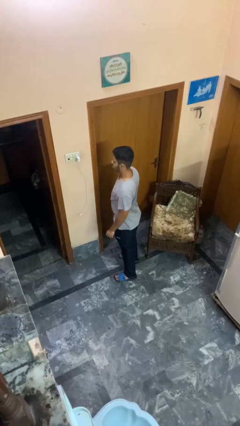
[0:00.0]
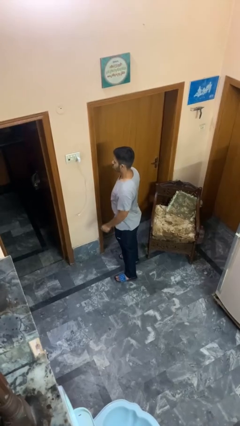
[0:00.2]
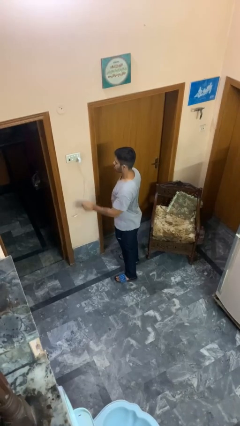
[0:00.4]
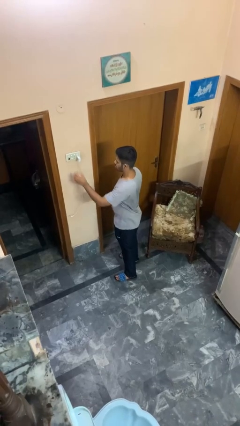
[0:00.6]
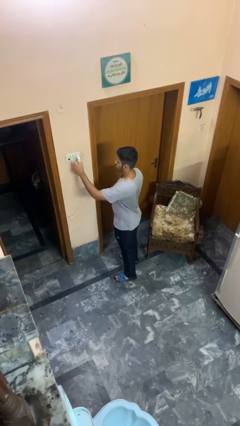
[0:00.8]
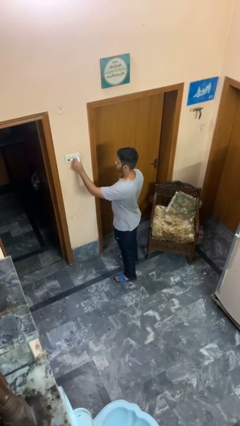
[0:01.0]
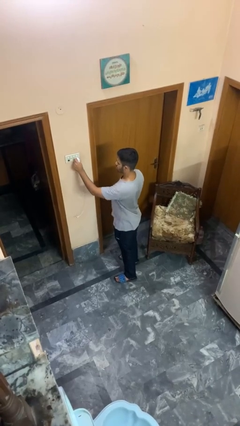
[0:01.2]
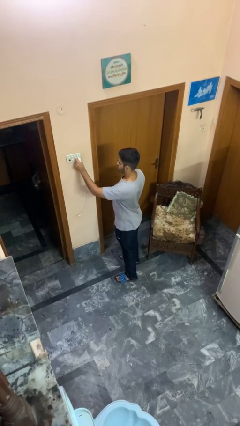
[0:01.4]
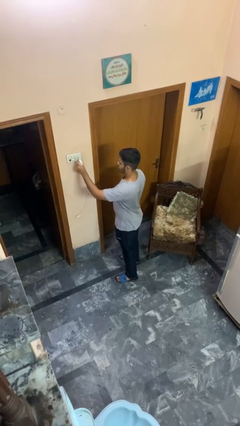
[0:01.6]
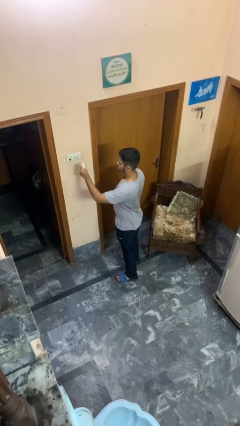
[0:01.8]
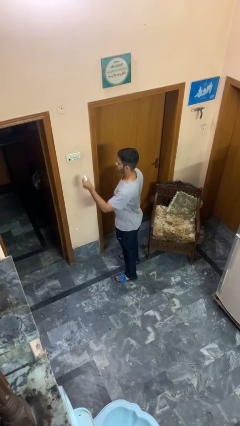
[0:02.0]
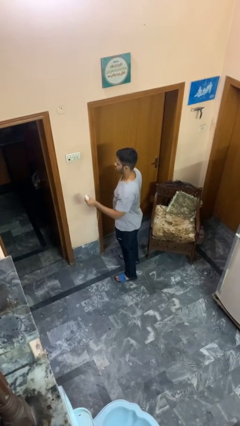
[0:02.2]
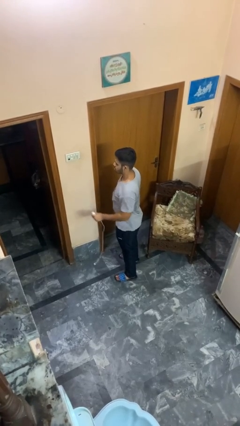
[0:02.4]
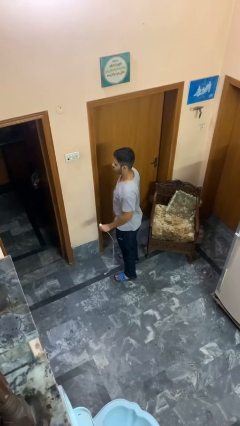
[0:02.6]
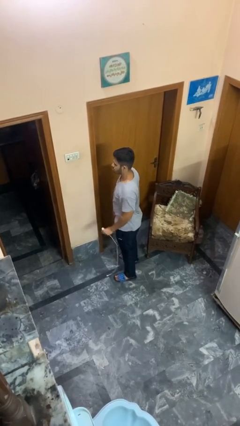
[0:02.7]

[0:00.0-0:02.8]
person unplugs from electrical socket

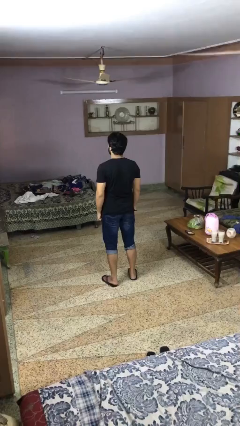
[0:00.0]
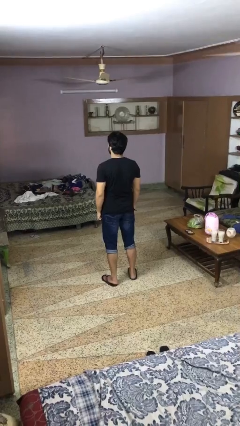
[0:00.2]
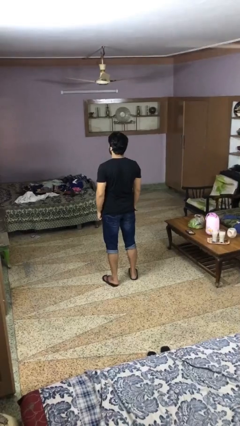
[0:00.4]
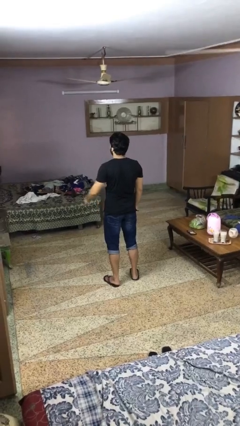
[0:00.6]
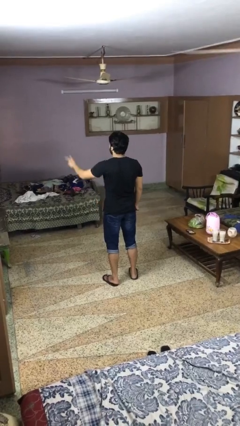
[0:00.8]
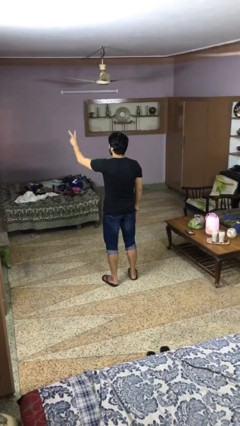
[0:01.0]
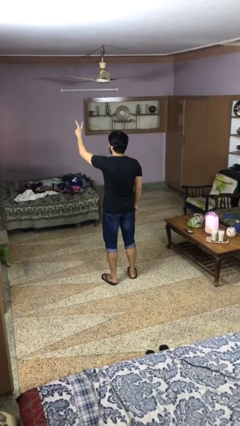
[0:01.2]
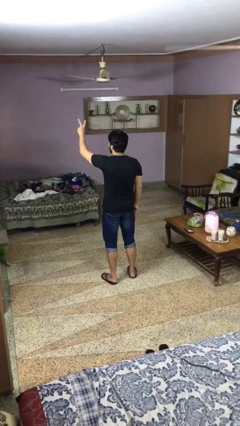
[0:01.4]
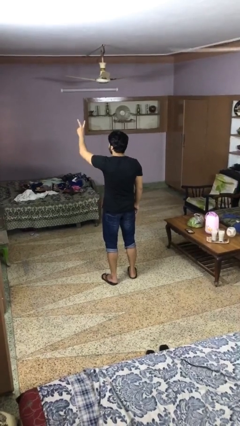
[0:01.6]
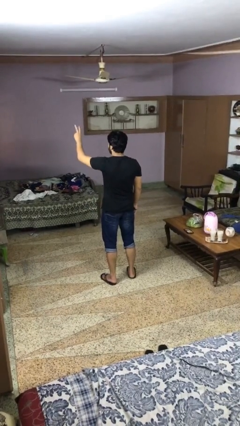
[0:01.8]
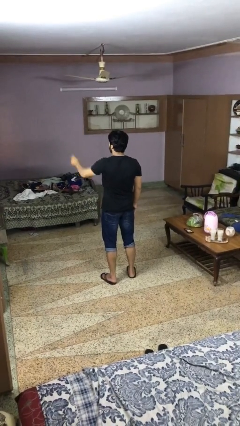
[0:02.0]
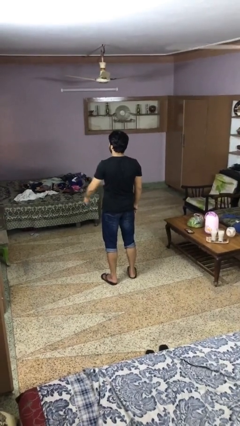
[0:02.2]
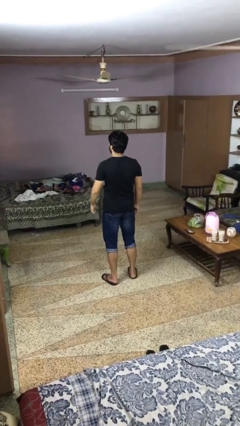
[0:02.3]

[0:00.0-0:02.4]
person gestures peace

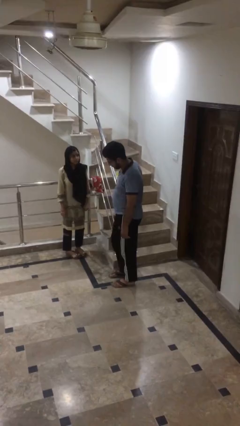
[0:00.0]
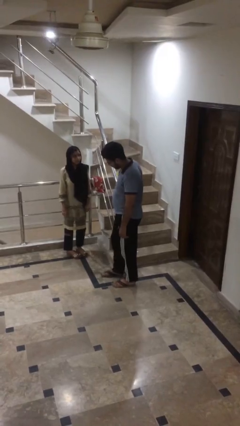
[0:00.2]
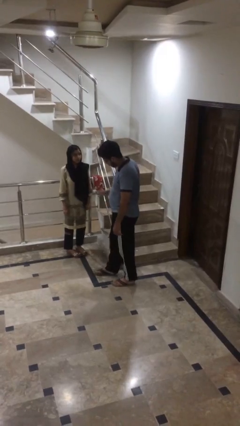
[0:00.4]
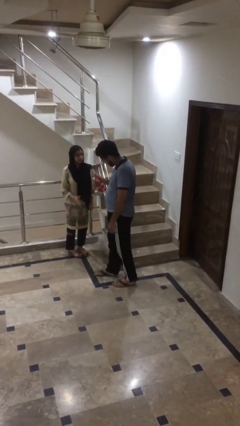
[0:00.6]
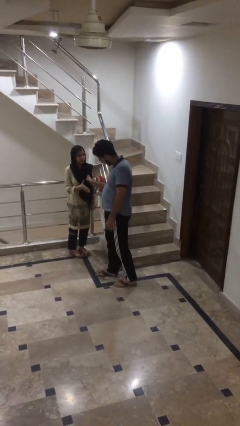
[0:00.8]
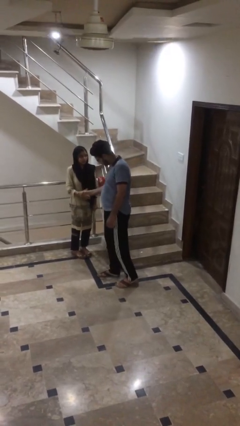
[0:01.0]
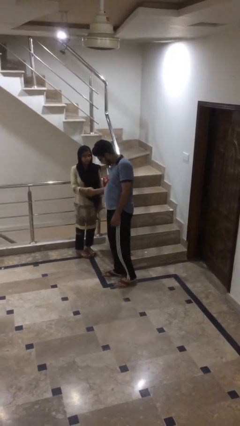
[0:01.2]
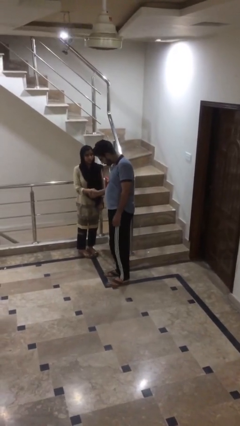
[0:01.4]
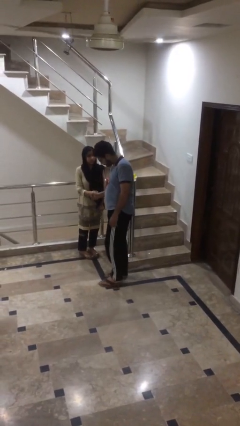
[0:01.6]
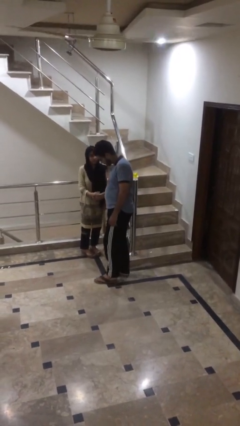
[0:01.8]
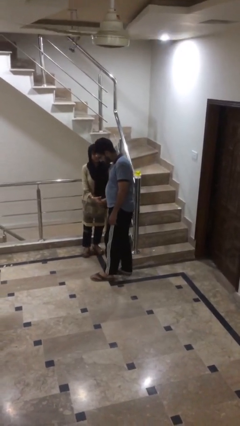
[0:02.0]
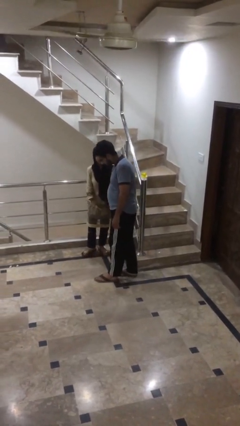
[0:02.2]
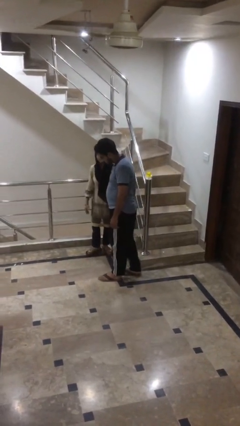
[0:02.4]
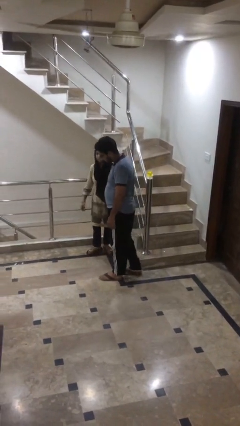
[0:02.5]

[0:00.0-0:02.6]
person shakes hand

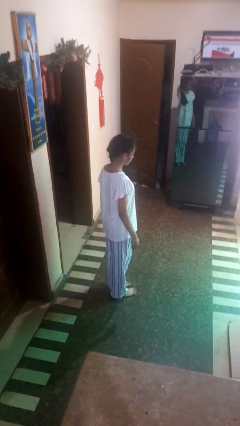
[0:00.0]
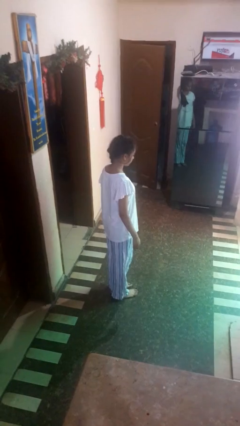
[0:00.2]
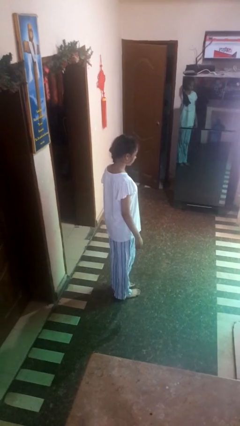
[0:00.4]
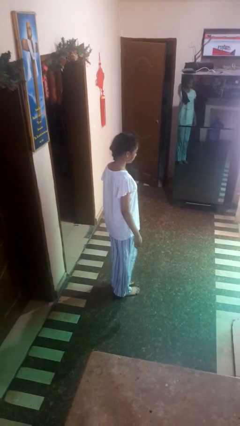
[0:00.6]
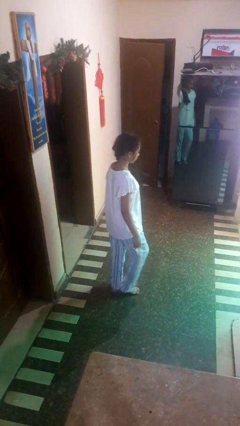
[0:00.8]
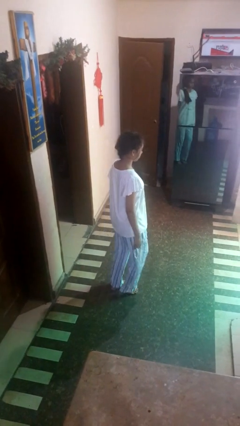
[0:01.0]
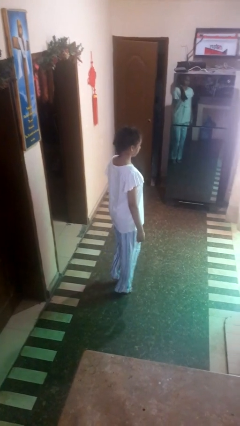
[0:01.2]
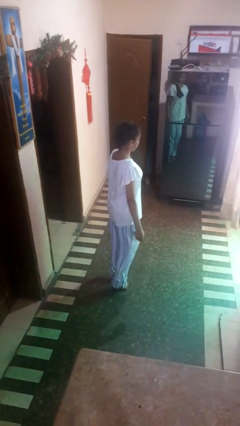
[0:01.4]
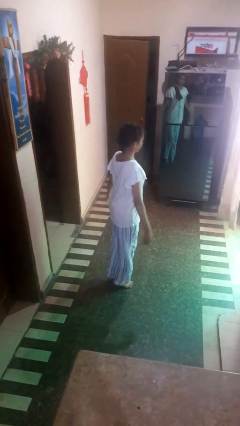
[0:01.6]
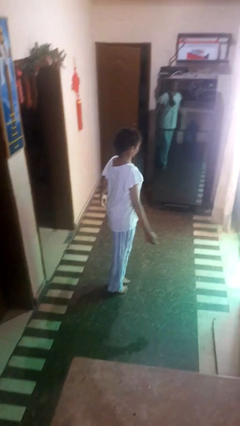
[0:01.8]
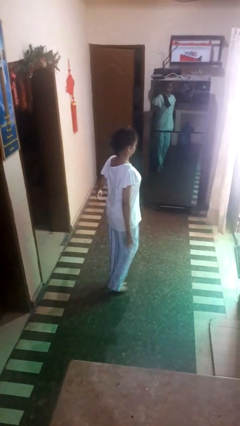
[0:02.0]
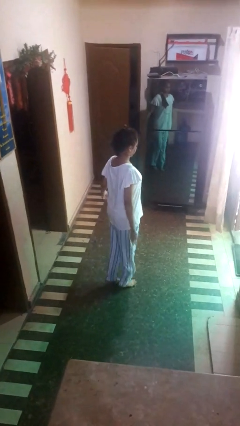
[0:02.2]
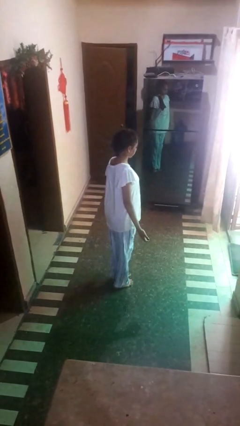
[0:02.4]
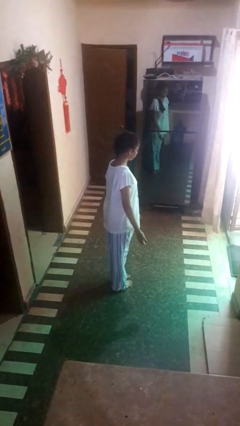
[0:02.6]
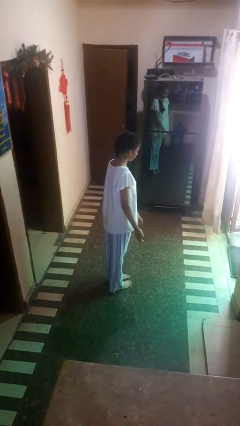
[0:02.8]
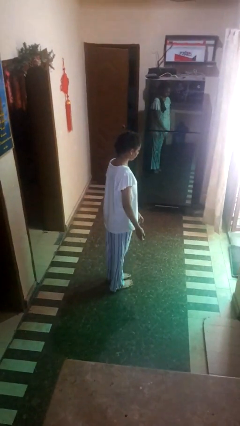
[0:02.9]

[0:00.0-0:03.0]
person walks tiptoe

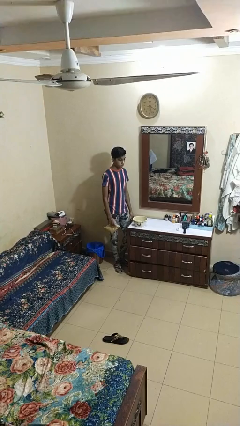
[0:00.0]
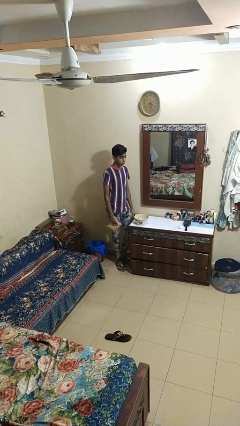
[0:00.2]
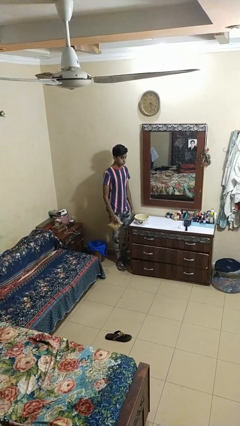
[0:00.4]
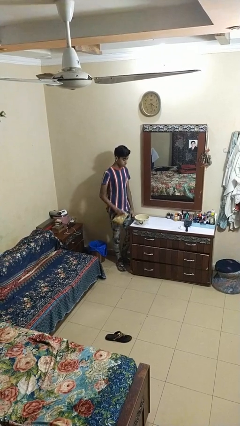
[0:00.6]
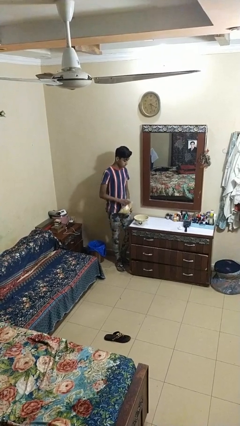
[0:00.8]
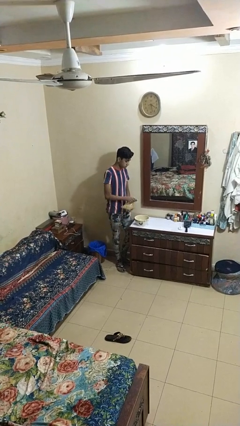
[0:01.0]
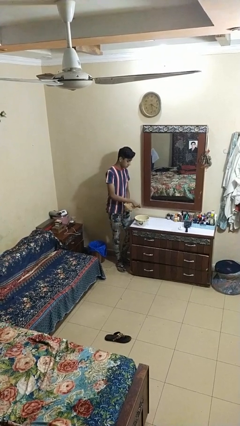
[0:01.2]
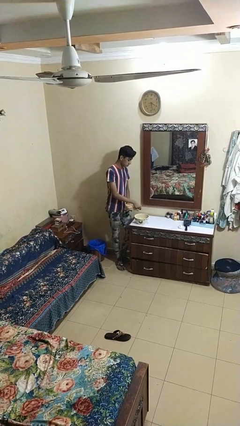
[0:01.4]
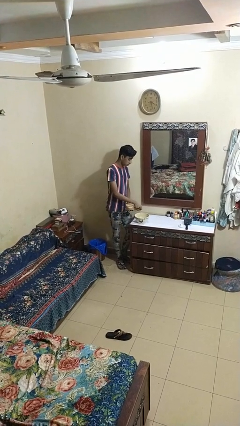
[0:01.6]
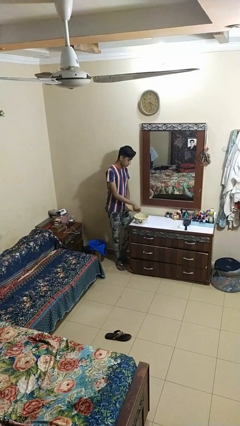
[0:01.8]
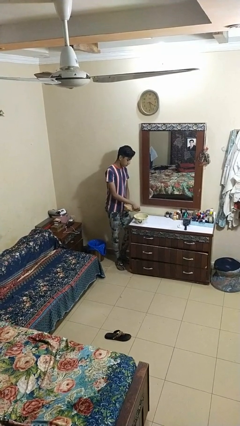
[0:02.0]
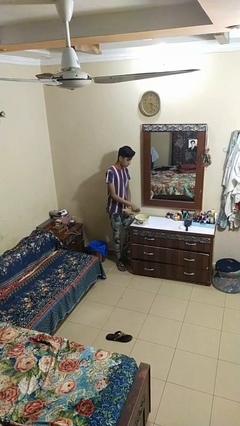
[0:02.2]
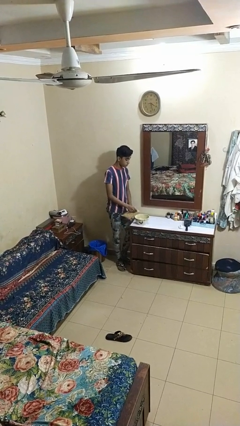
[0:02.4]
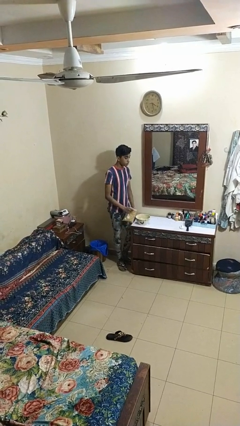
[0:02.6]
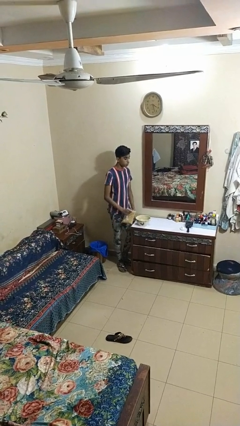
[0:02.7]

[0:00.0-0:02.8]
person pours into bowl

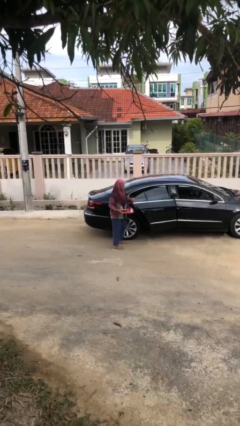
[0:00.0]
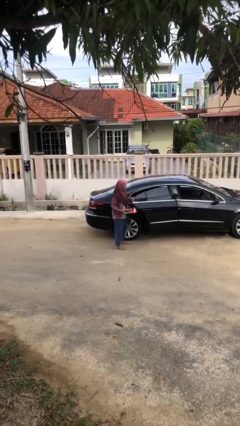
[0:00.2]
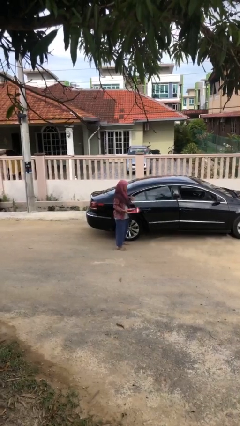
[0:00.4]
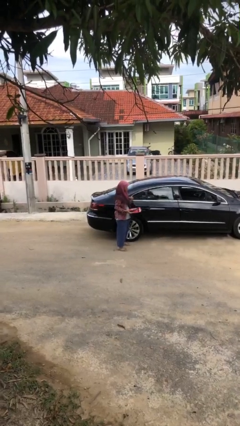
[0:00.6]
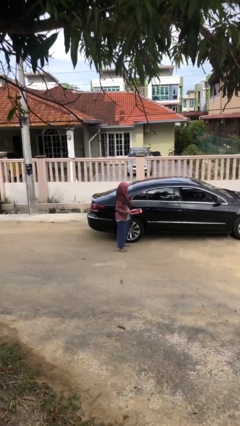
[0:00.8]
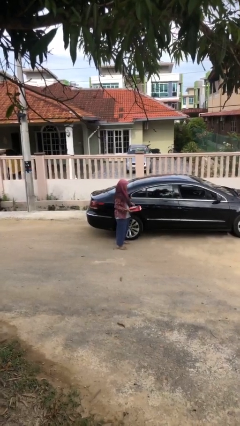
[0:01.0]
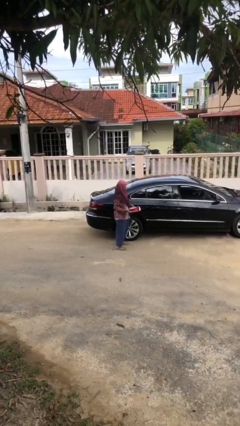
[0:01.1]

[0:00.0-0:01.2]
person closes car door

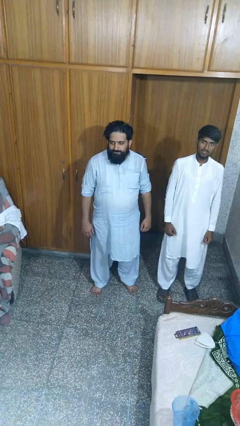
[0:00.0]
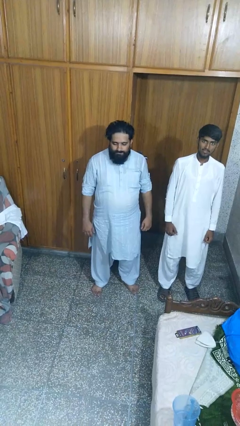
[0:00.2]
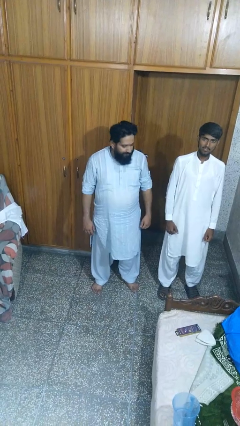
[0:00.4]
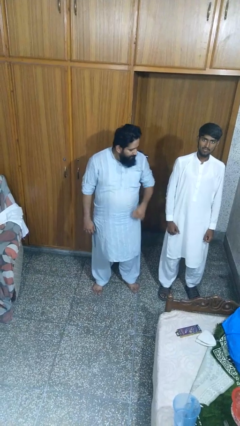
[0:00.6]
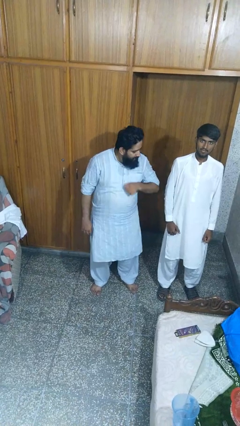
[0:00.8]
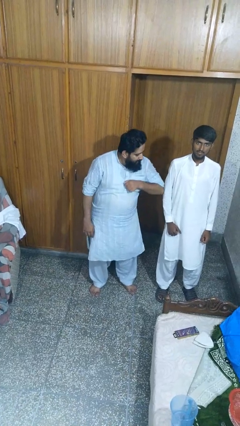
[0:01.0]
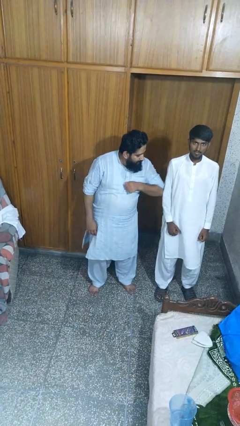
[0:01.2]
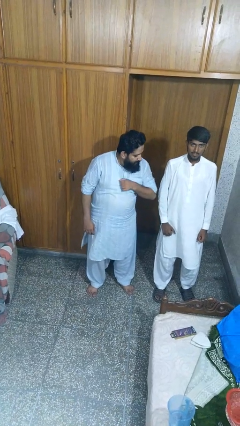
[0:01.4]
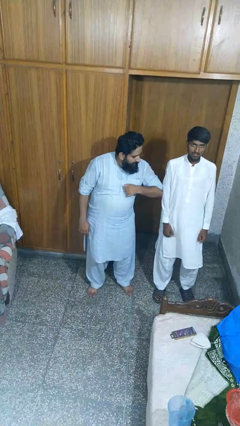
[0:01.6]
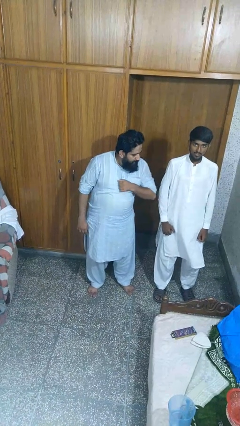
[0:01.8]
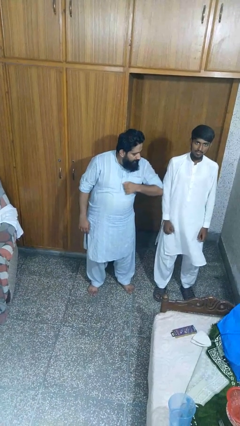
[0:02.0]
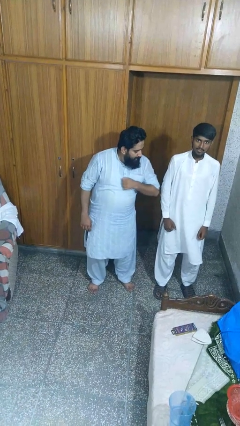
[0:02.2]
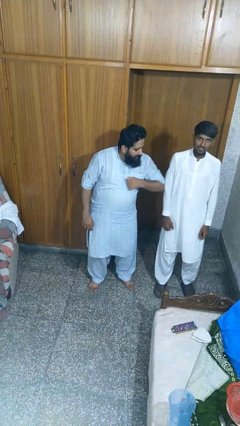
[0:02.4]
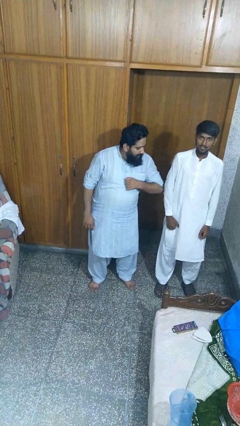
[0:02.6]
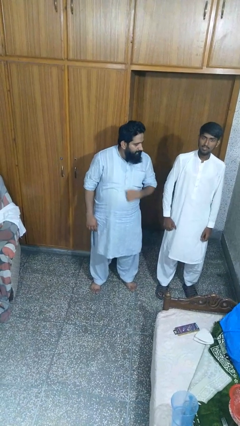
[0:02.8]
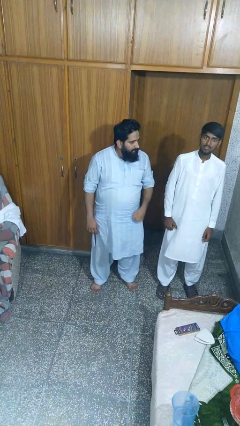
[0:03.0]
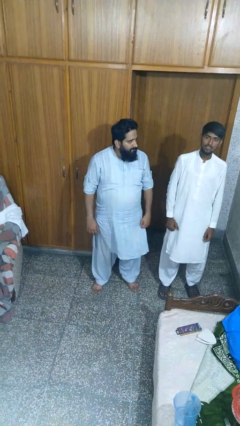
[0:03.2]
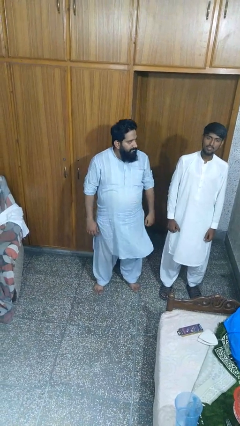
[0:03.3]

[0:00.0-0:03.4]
person nudges person with elbow
